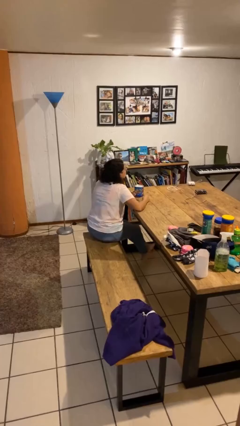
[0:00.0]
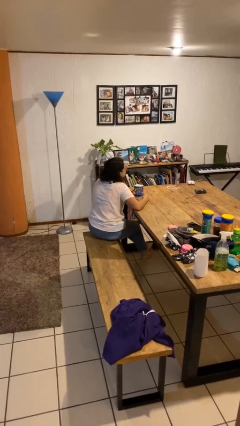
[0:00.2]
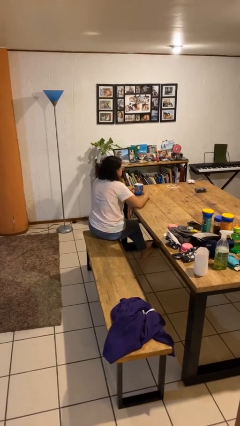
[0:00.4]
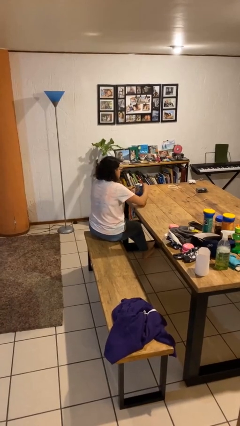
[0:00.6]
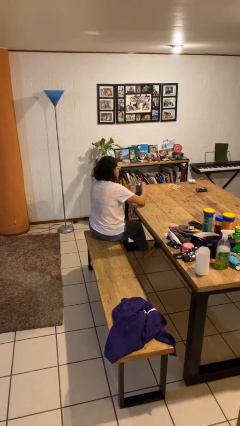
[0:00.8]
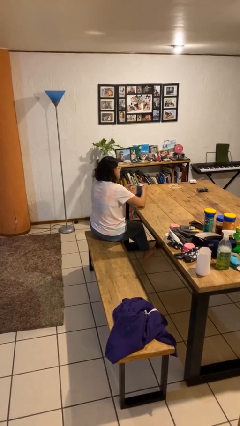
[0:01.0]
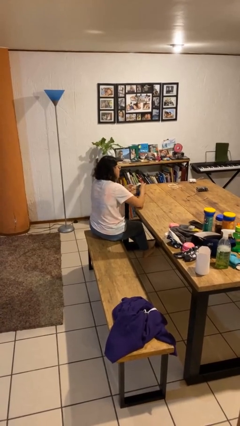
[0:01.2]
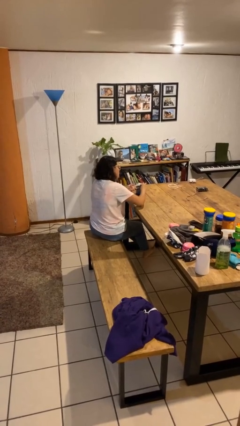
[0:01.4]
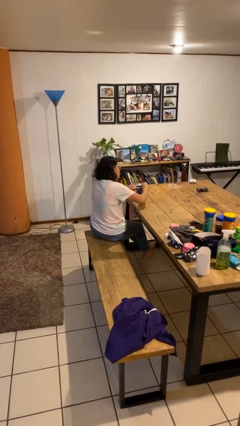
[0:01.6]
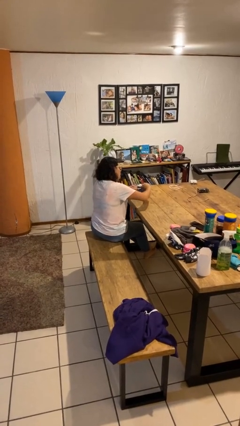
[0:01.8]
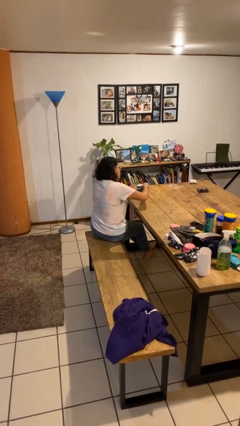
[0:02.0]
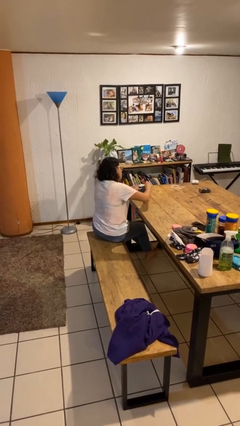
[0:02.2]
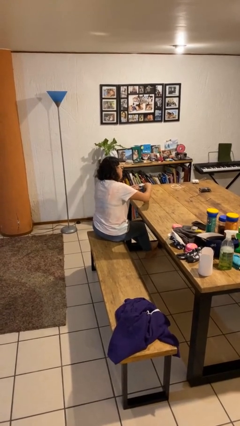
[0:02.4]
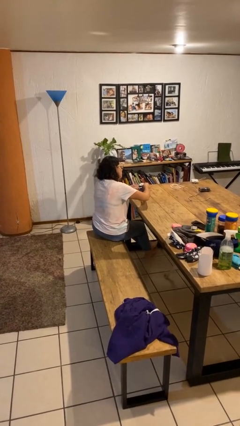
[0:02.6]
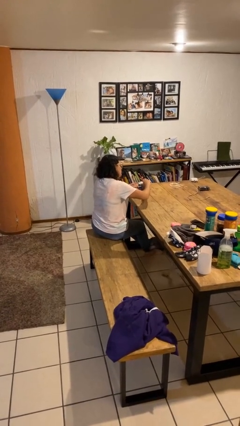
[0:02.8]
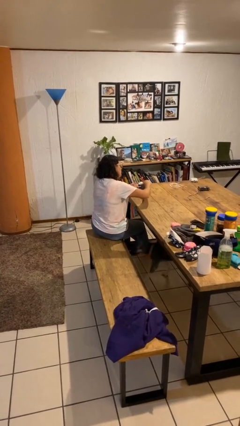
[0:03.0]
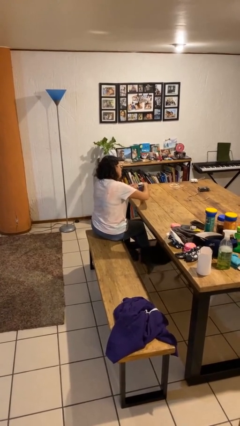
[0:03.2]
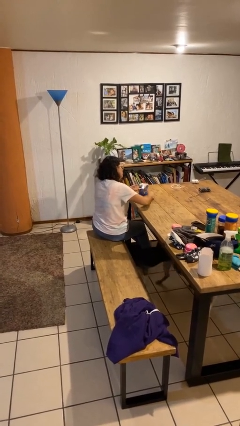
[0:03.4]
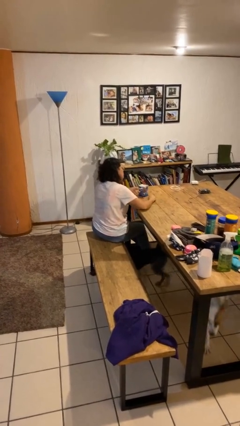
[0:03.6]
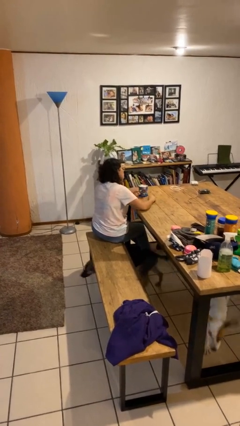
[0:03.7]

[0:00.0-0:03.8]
person opens can with can opener

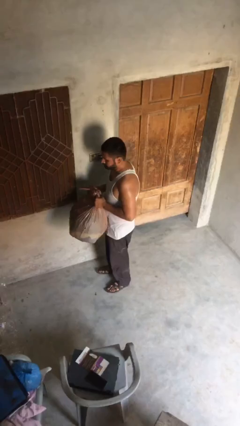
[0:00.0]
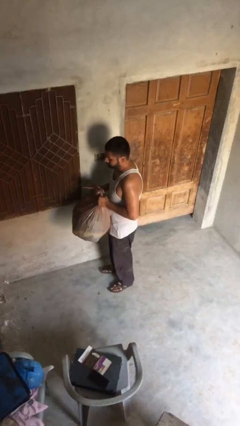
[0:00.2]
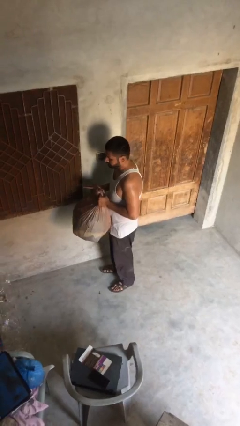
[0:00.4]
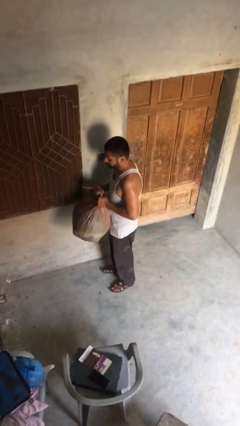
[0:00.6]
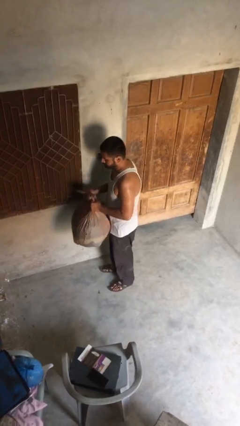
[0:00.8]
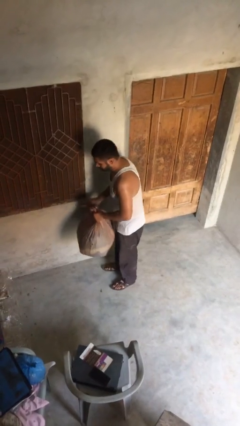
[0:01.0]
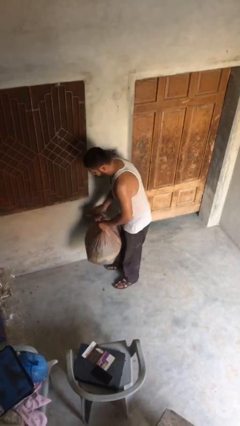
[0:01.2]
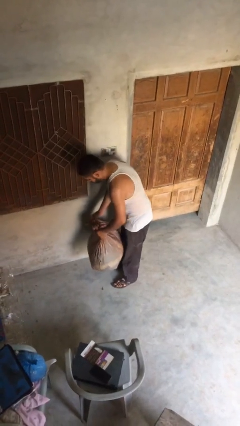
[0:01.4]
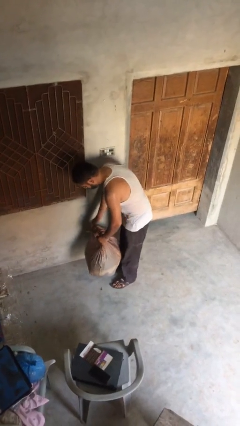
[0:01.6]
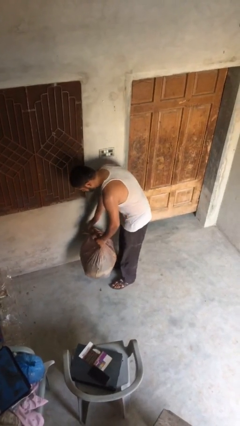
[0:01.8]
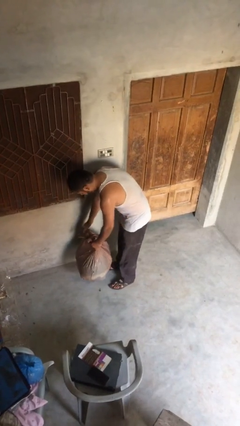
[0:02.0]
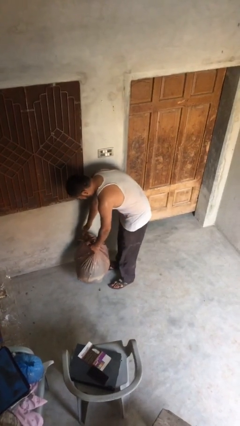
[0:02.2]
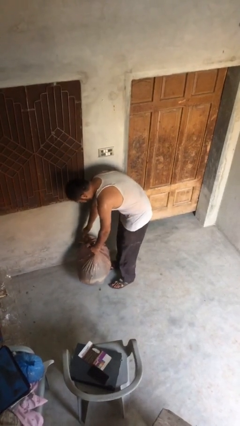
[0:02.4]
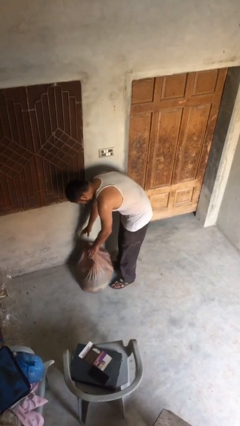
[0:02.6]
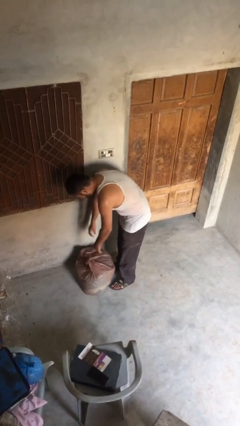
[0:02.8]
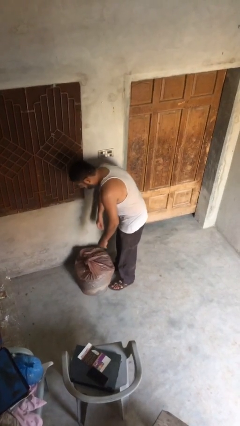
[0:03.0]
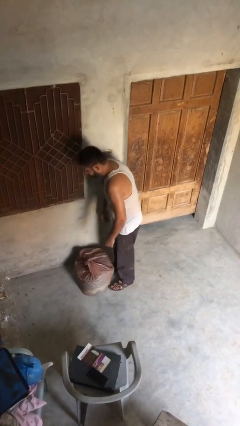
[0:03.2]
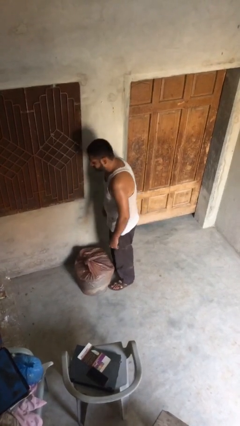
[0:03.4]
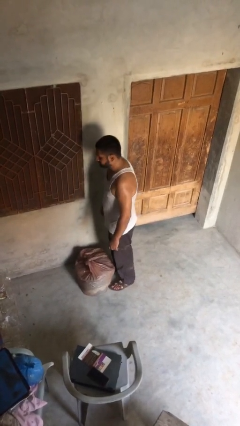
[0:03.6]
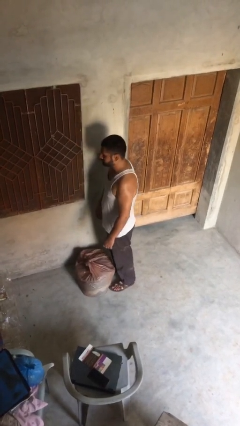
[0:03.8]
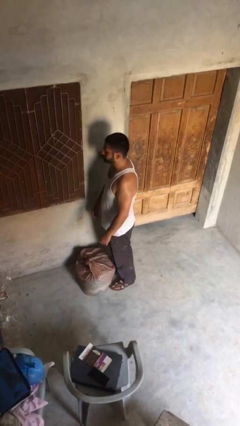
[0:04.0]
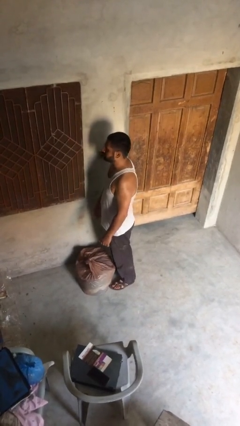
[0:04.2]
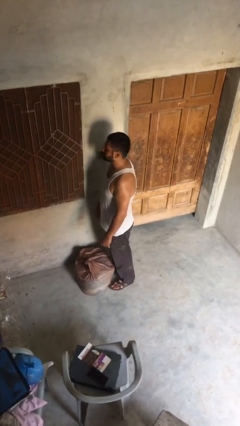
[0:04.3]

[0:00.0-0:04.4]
person puts down object on floor

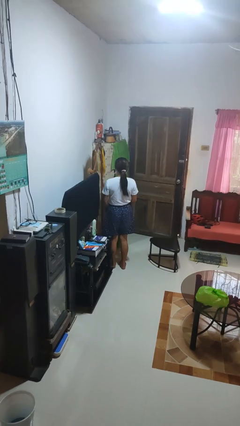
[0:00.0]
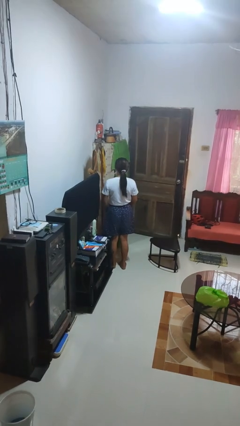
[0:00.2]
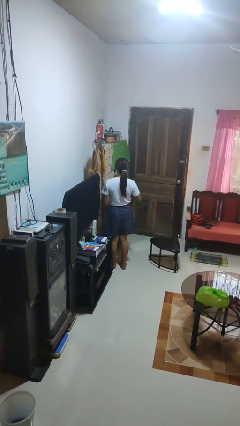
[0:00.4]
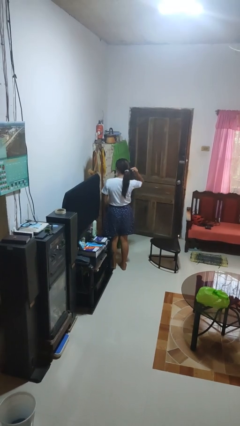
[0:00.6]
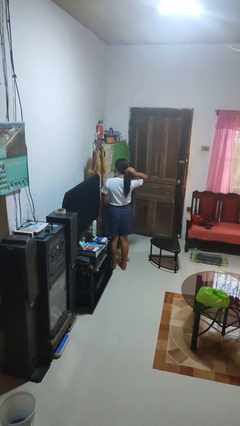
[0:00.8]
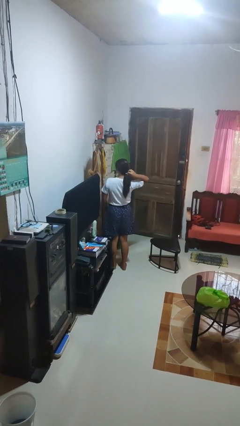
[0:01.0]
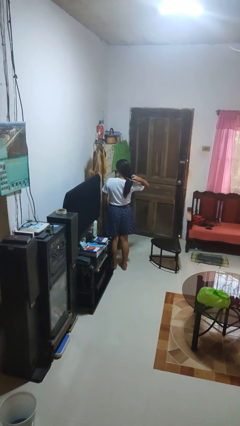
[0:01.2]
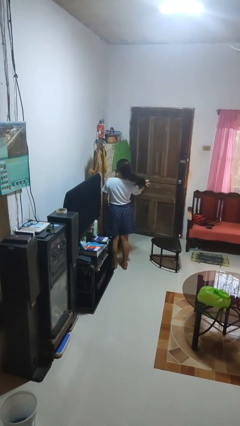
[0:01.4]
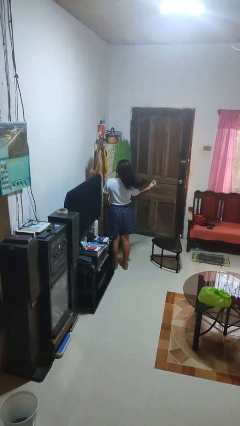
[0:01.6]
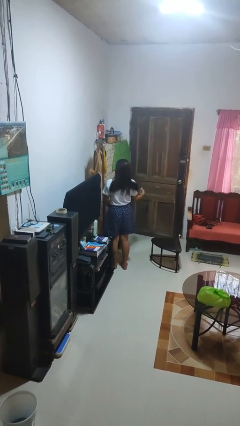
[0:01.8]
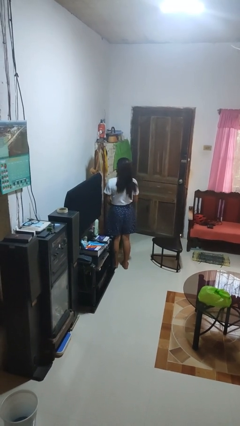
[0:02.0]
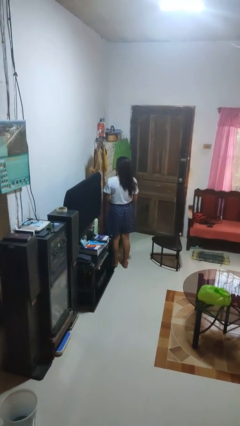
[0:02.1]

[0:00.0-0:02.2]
person takes off hairtie

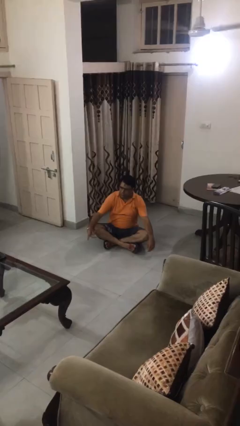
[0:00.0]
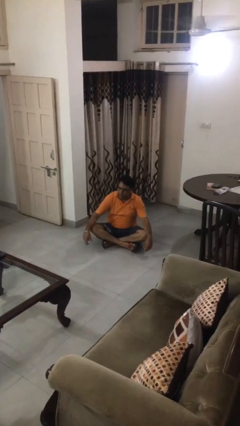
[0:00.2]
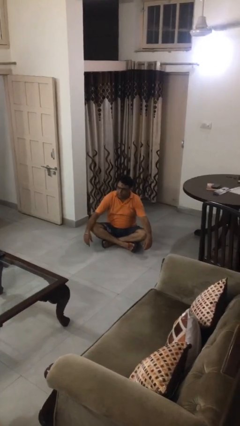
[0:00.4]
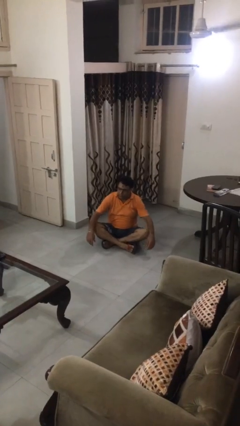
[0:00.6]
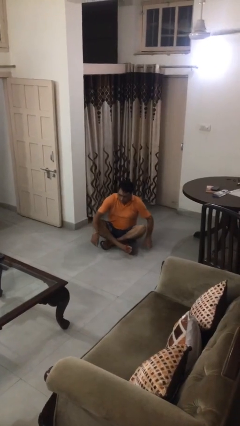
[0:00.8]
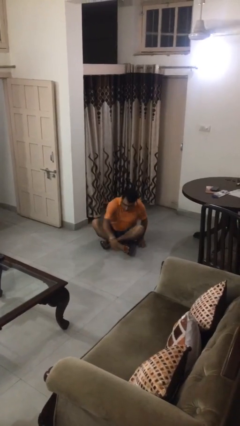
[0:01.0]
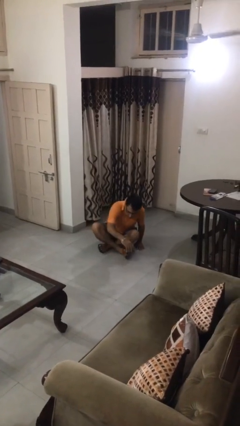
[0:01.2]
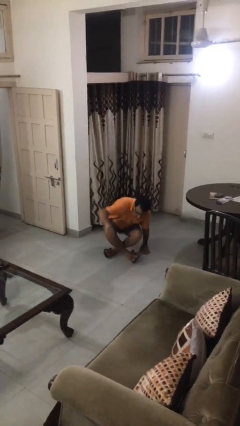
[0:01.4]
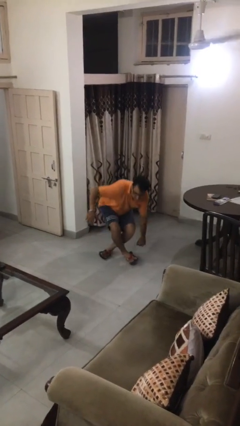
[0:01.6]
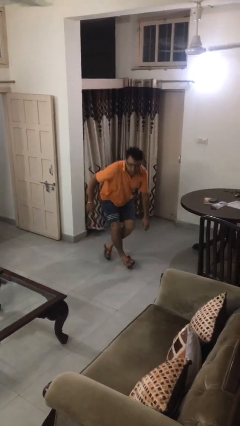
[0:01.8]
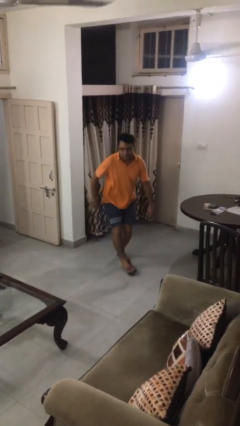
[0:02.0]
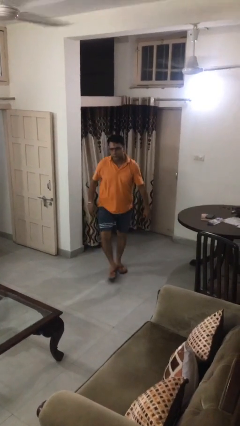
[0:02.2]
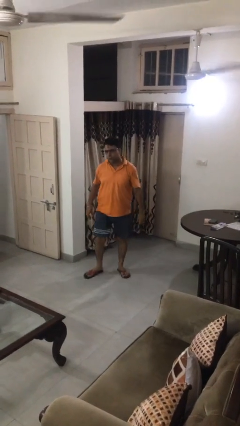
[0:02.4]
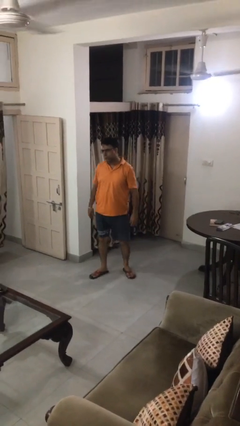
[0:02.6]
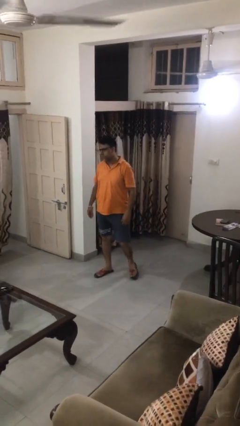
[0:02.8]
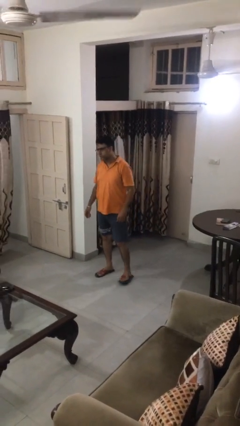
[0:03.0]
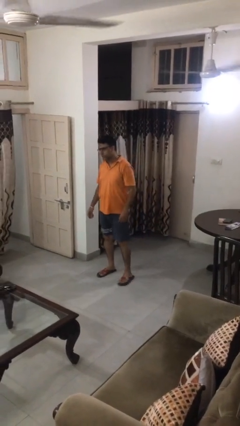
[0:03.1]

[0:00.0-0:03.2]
person stands up from floor

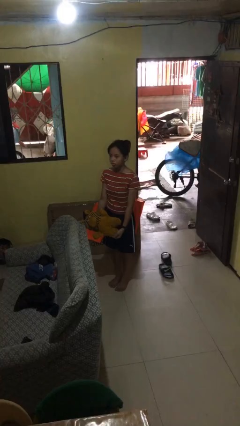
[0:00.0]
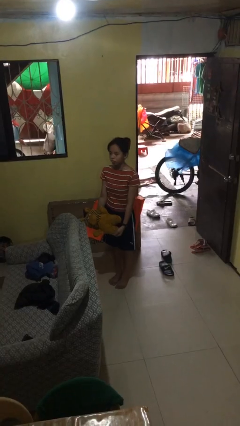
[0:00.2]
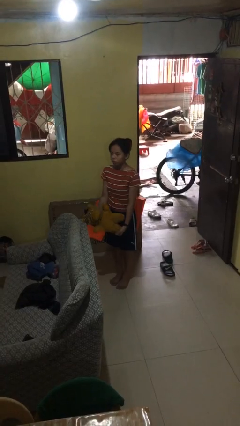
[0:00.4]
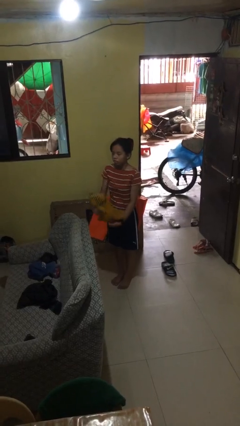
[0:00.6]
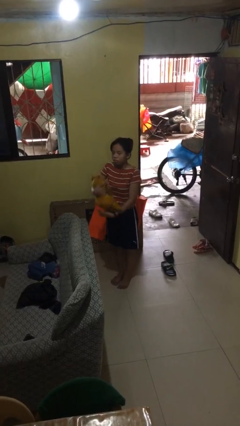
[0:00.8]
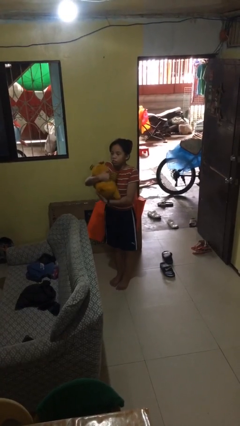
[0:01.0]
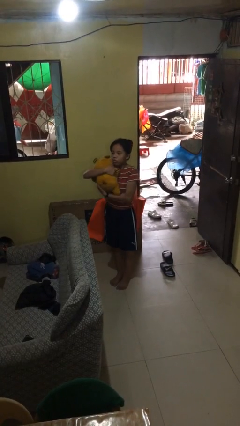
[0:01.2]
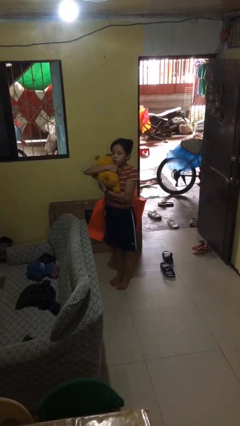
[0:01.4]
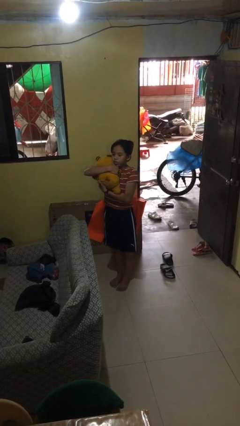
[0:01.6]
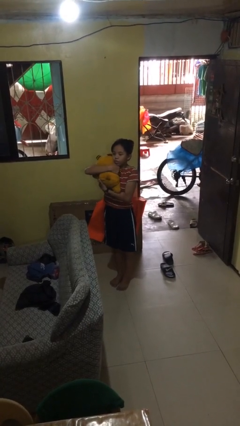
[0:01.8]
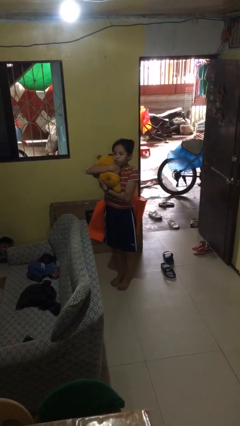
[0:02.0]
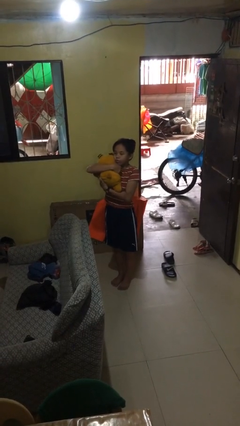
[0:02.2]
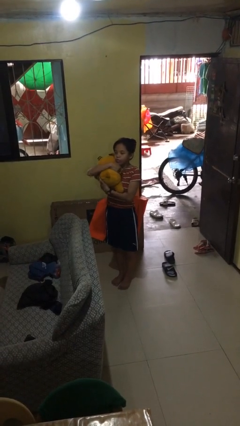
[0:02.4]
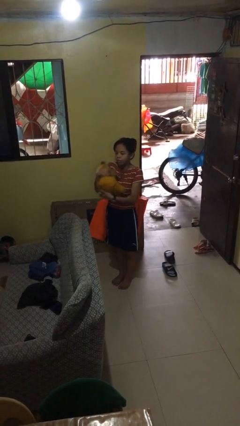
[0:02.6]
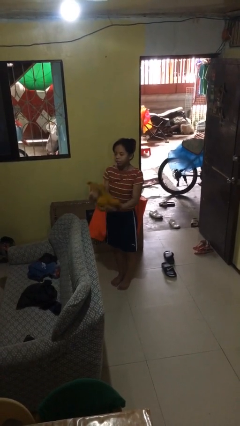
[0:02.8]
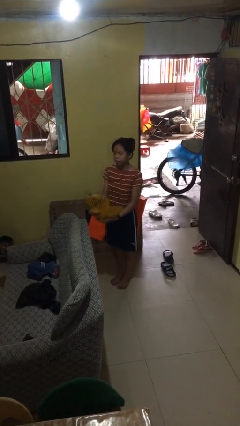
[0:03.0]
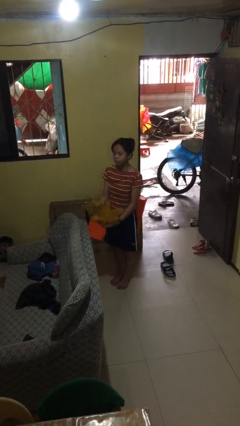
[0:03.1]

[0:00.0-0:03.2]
person hugs stuffed animal

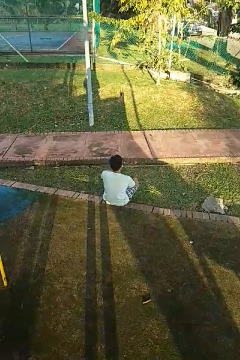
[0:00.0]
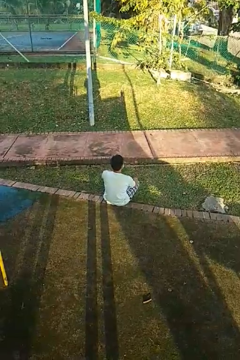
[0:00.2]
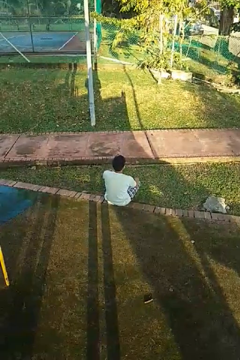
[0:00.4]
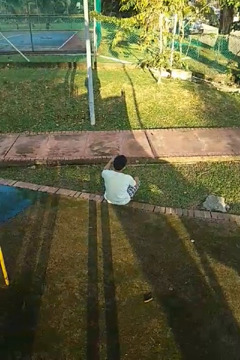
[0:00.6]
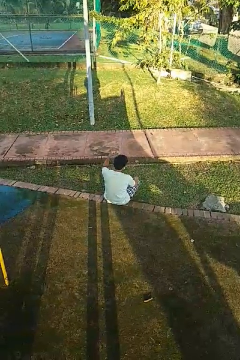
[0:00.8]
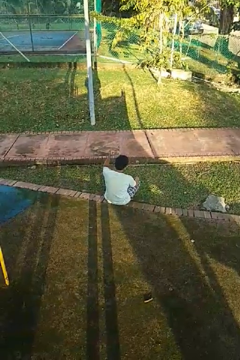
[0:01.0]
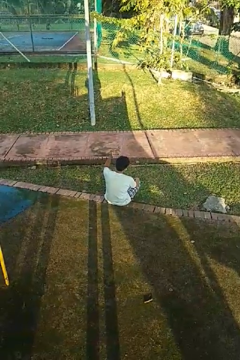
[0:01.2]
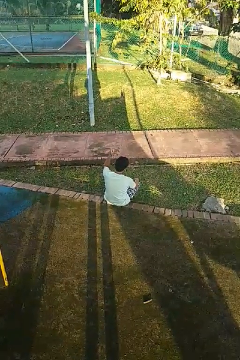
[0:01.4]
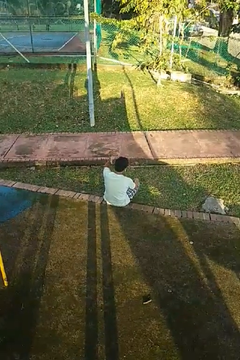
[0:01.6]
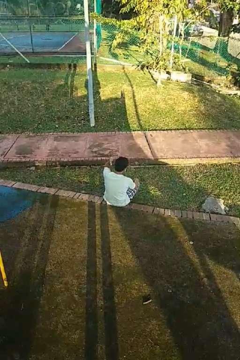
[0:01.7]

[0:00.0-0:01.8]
person gestures behind me
